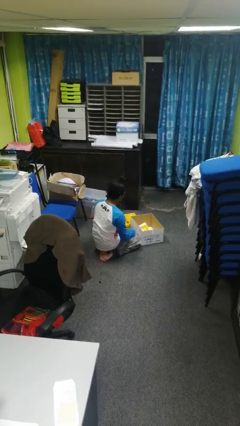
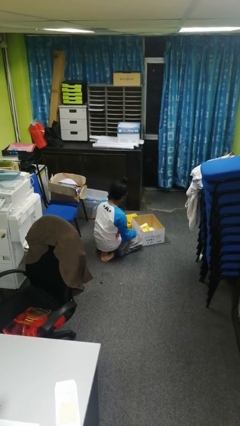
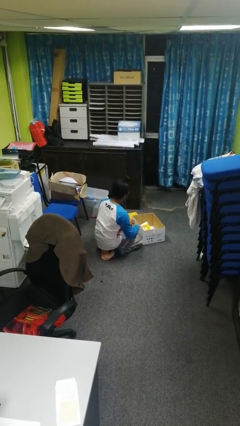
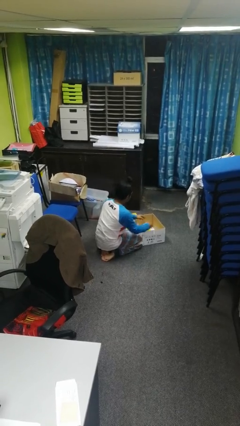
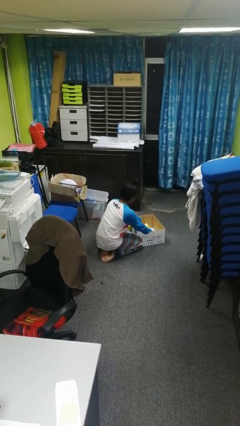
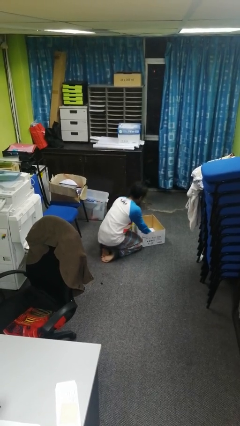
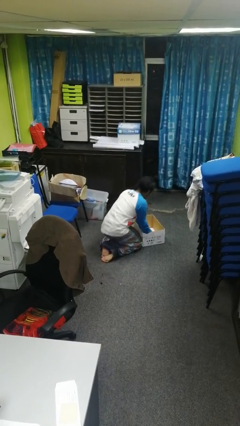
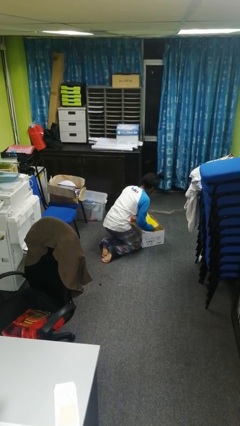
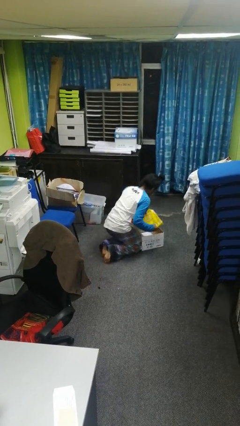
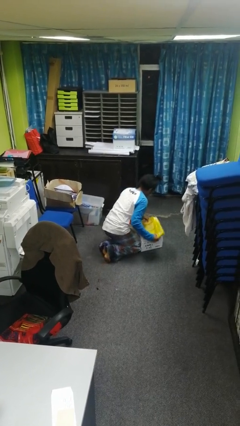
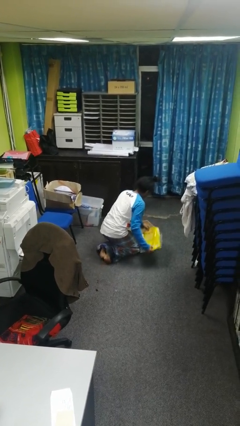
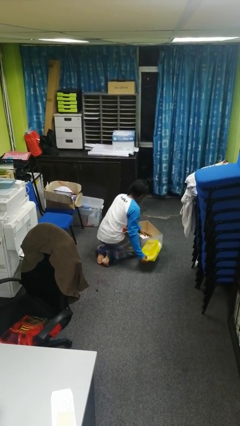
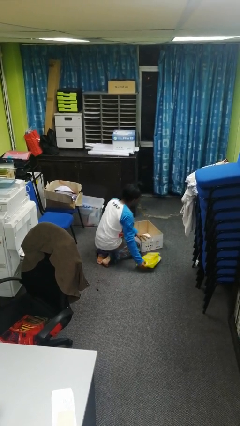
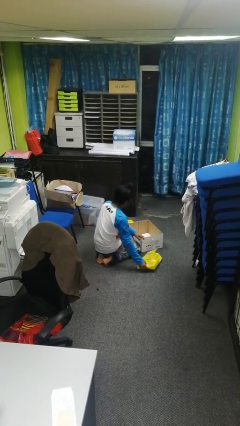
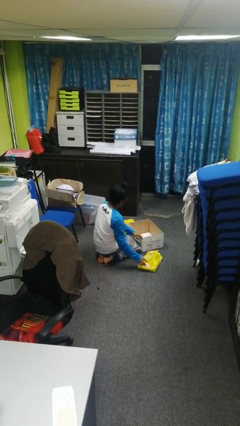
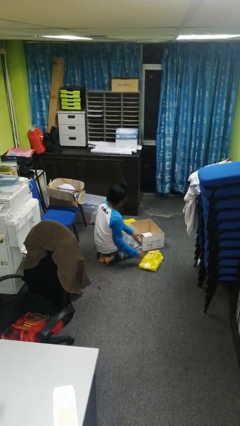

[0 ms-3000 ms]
person takes object from box

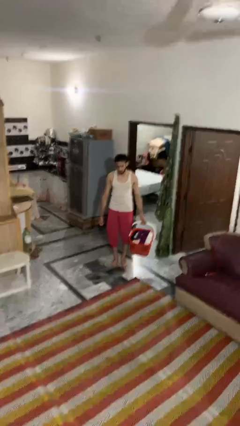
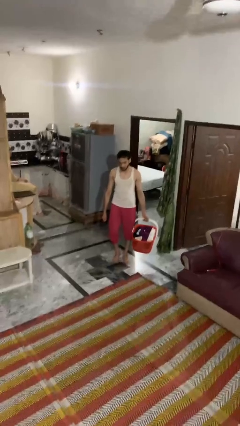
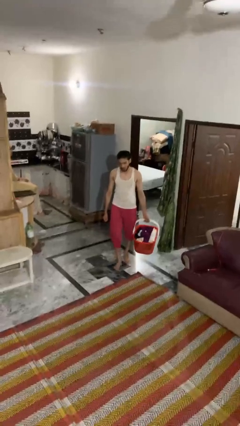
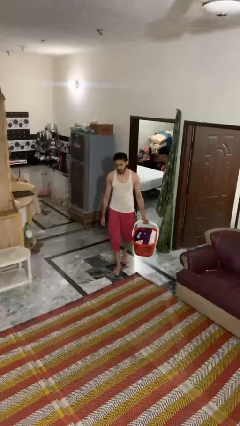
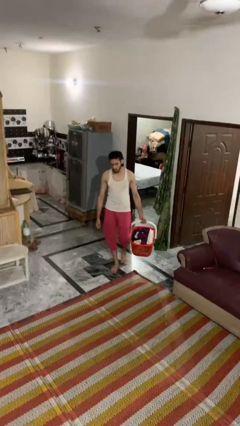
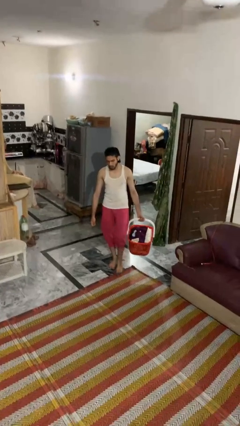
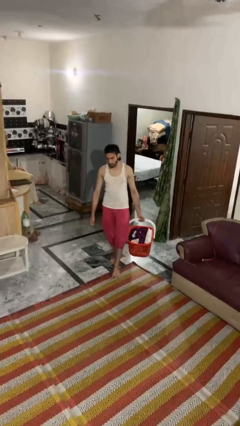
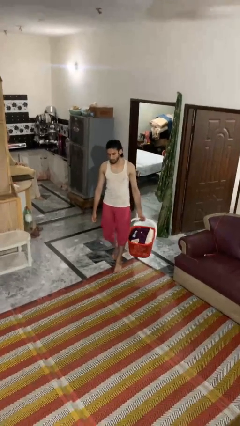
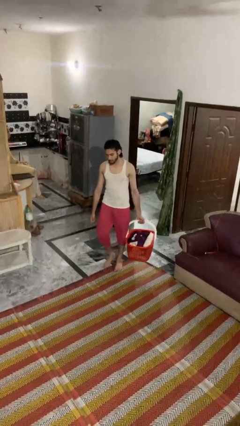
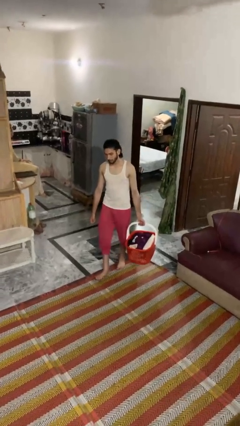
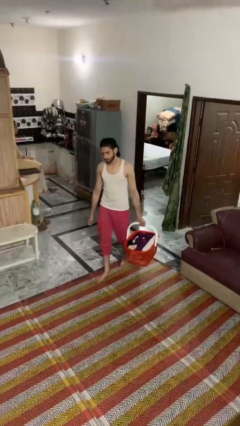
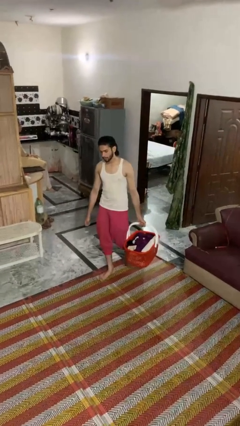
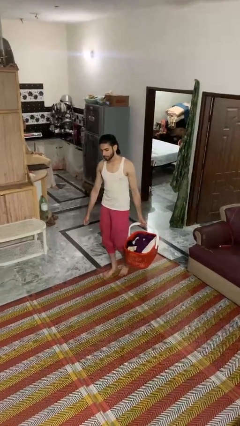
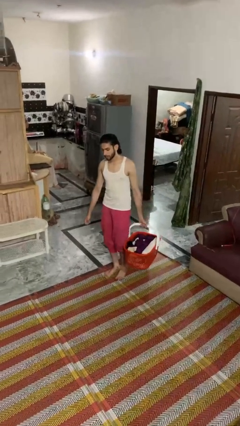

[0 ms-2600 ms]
person carries laundry basket

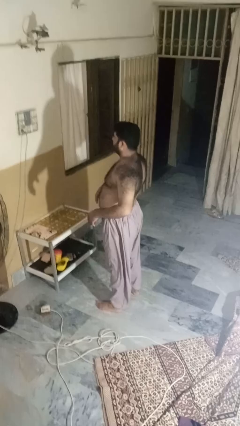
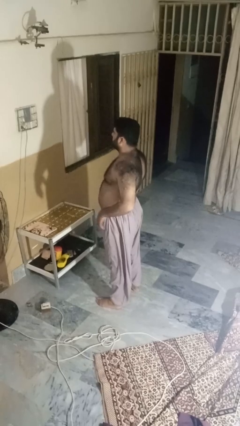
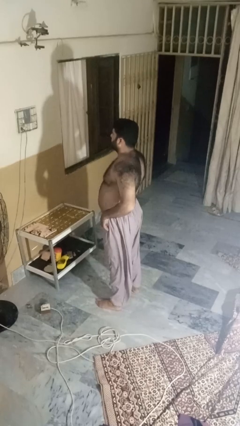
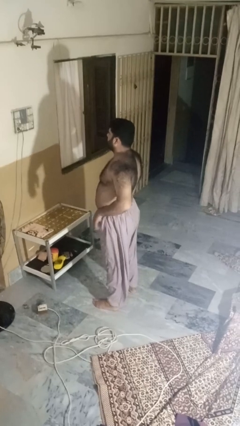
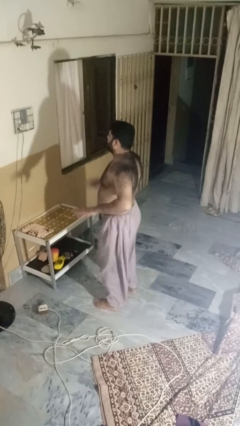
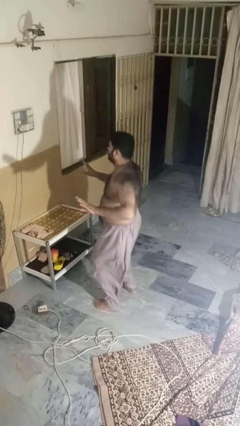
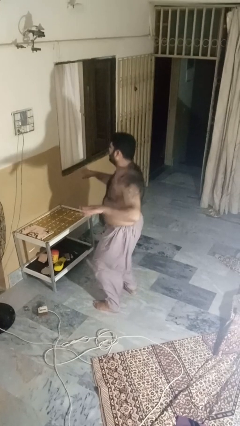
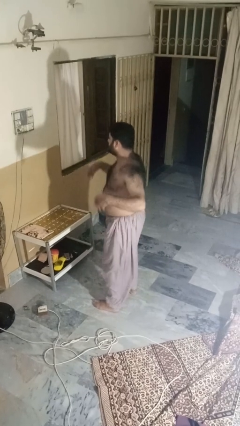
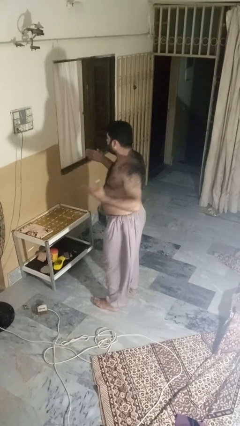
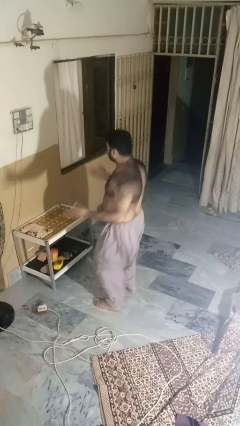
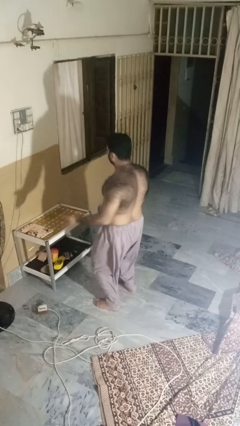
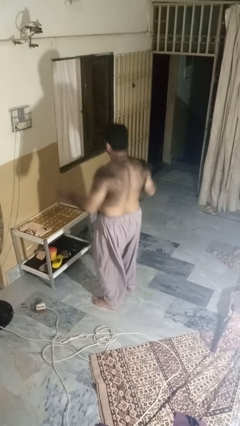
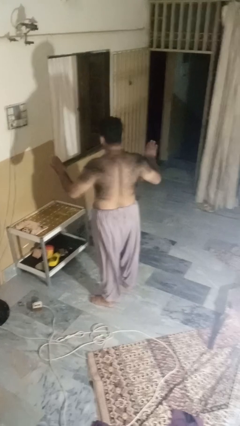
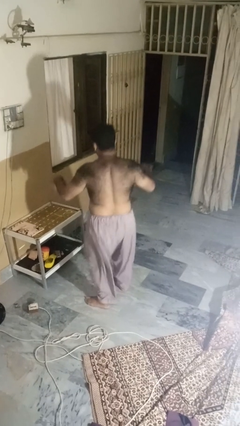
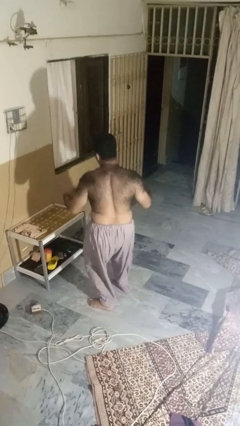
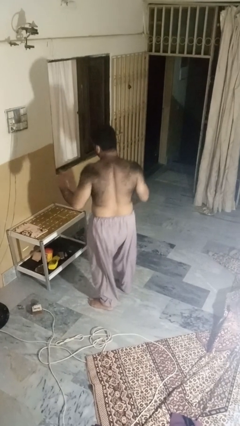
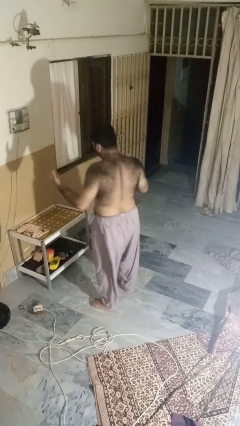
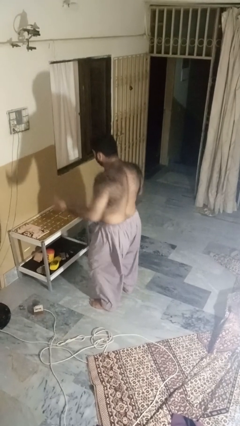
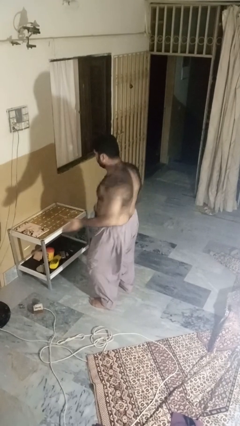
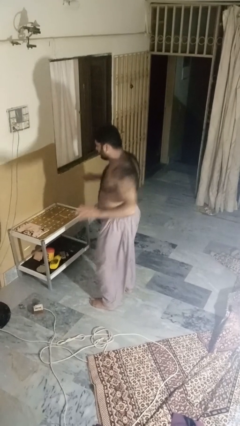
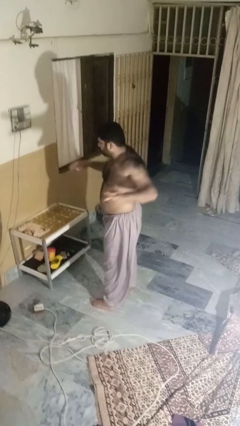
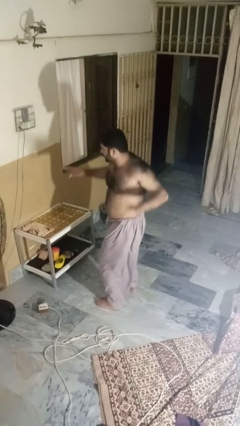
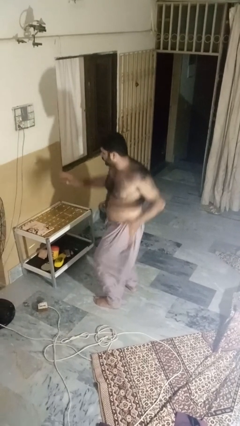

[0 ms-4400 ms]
person dances in place

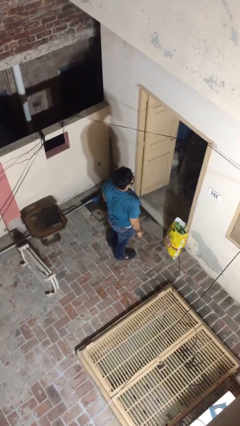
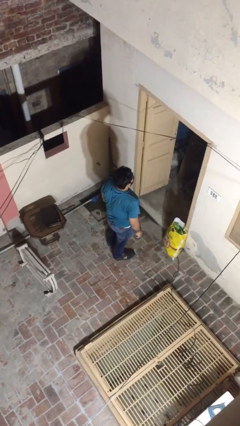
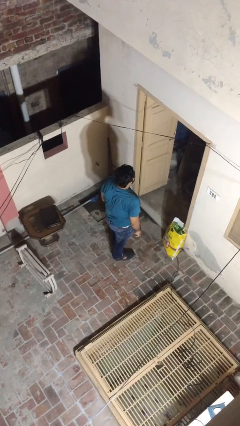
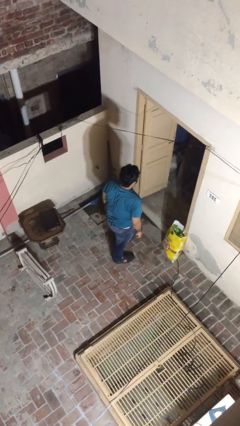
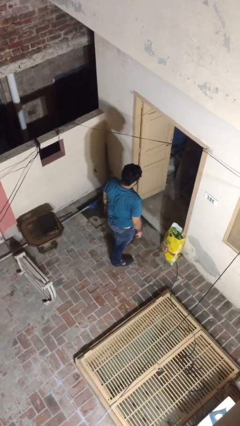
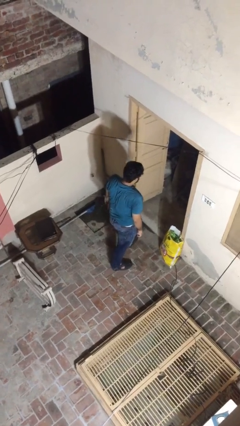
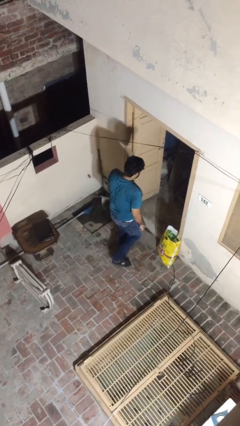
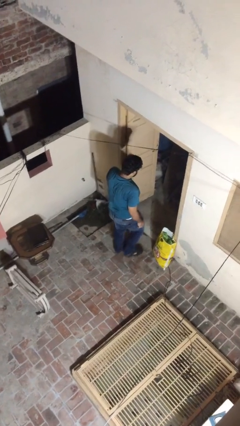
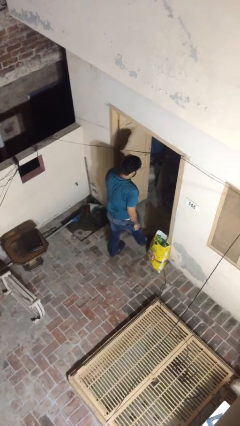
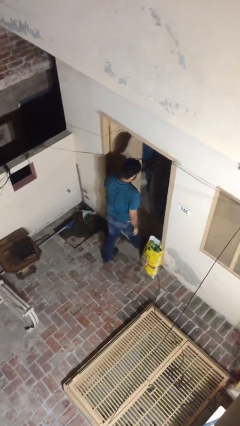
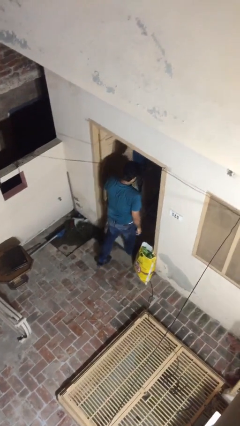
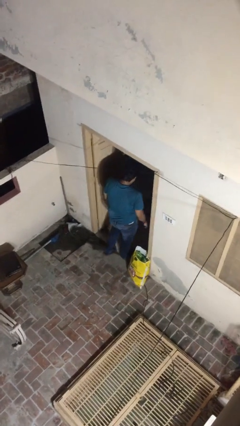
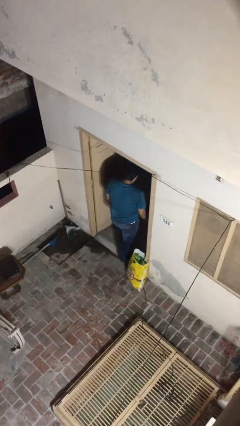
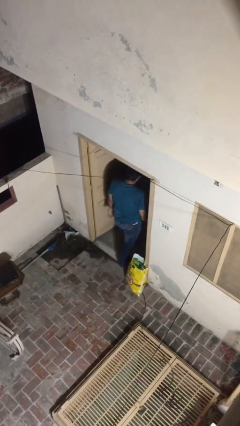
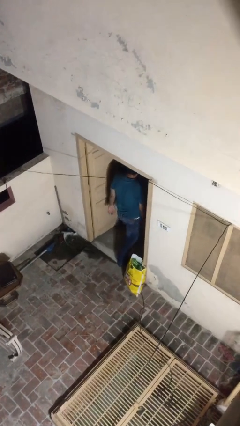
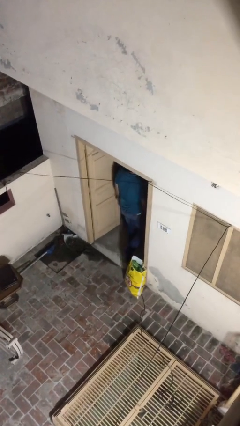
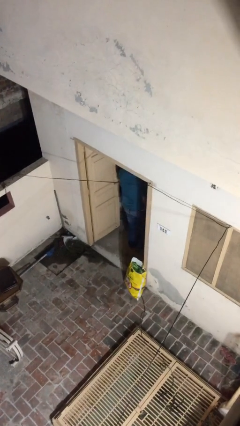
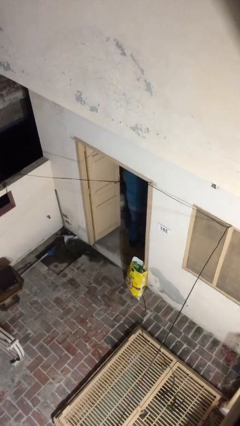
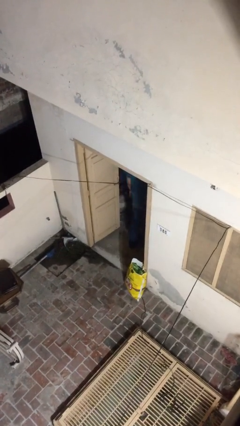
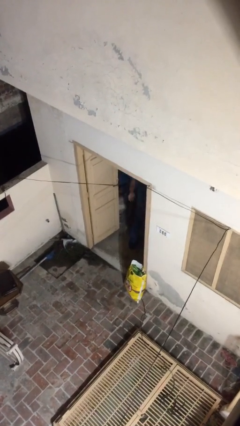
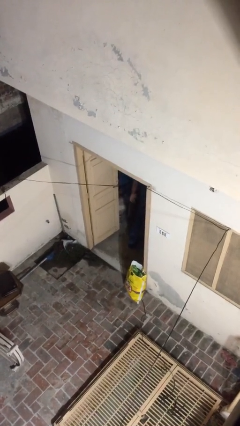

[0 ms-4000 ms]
person exits scene through structure

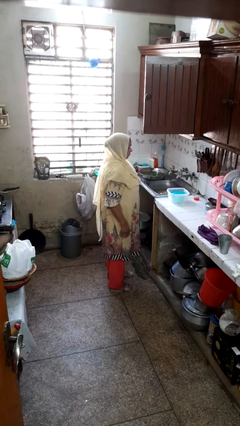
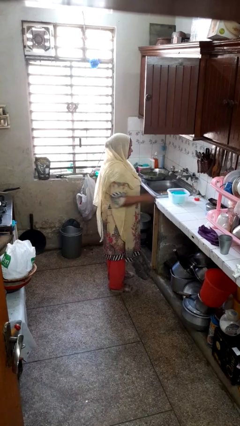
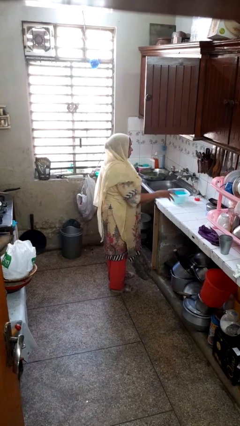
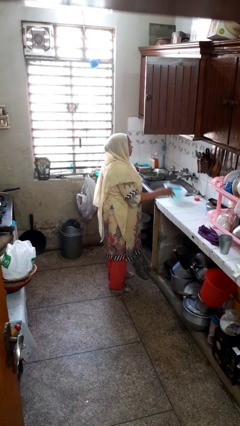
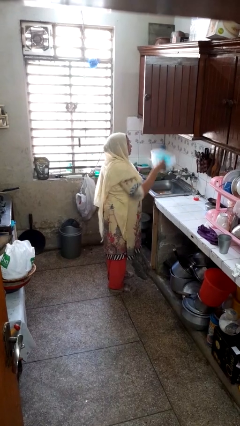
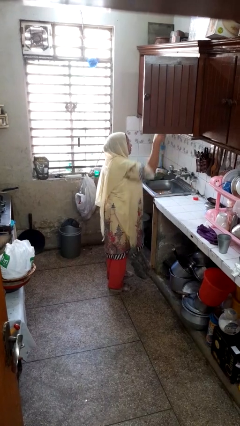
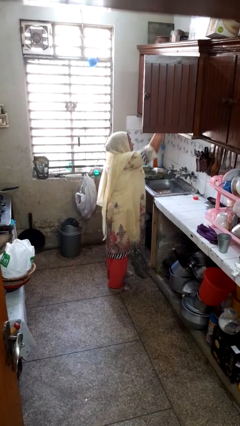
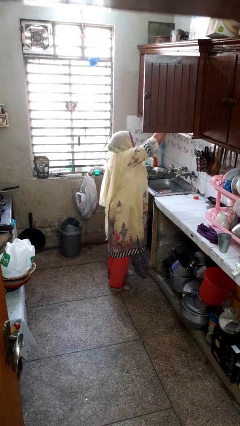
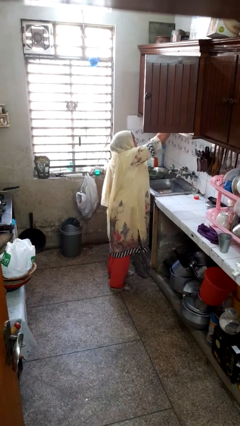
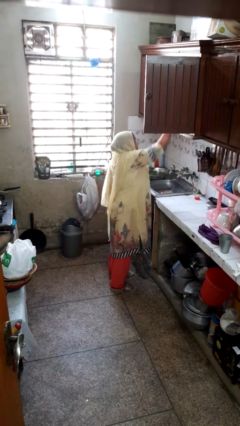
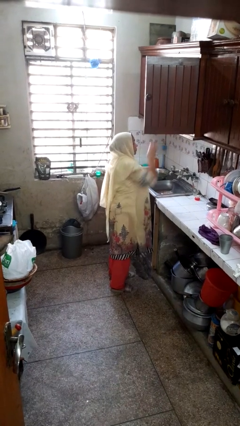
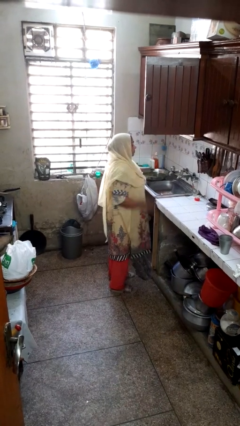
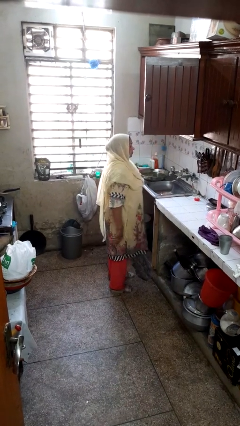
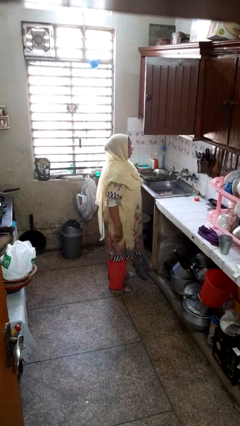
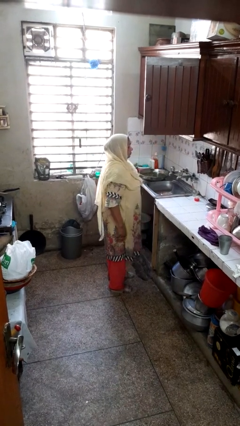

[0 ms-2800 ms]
person puts object in cabinet

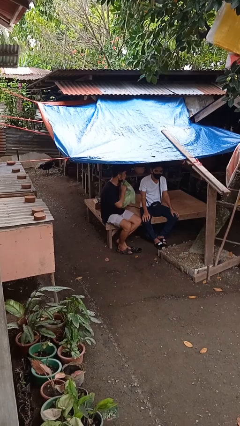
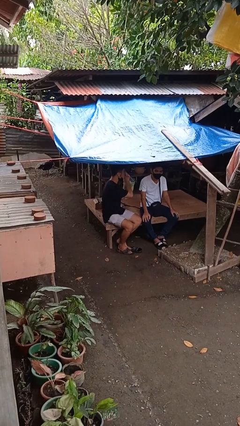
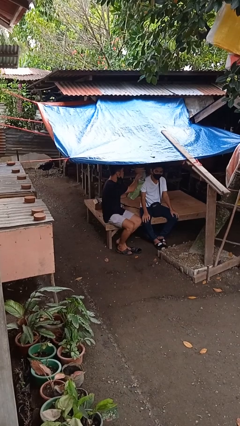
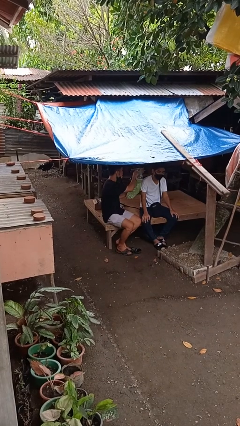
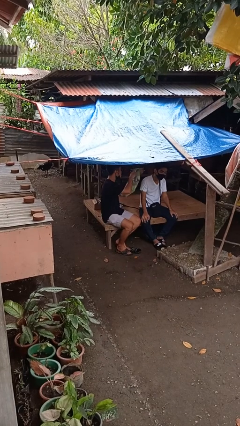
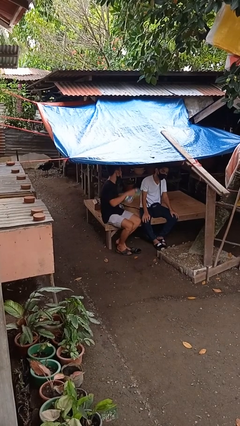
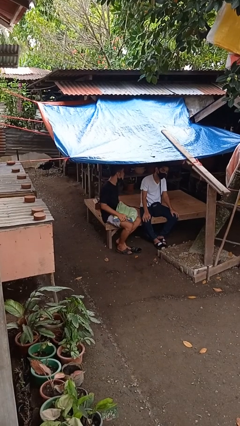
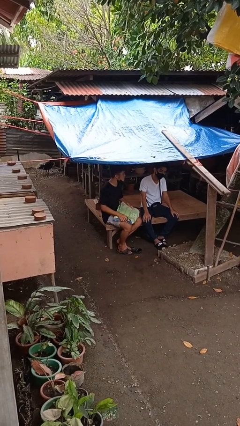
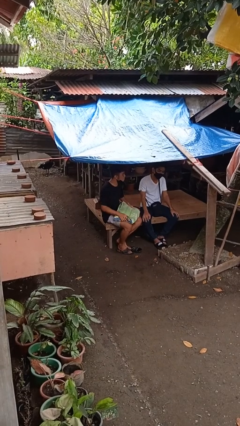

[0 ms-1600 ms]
person hits person with pillow
